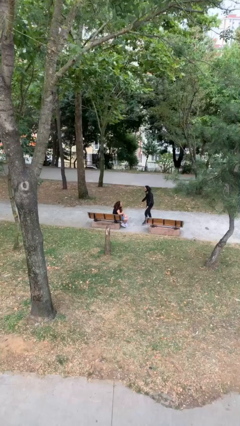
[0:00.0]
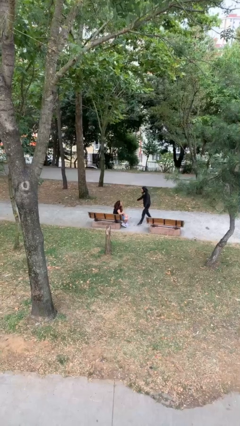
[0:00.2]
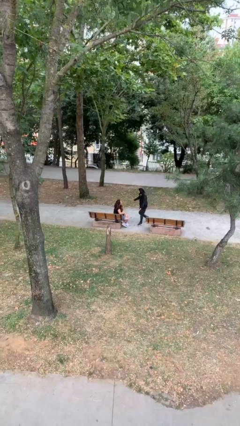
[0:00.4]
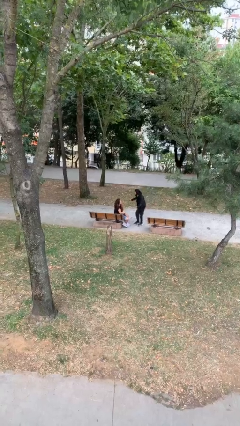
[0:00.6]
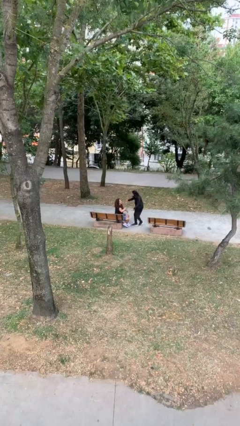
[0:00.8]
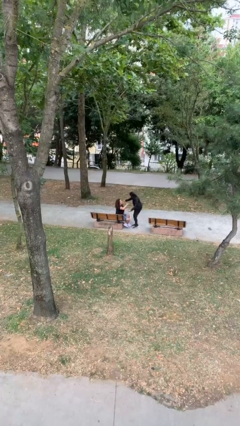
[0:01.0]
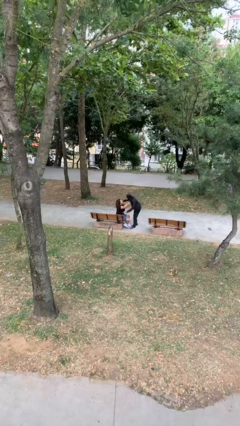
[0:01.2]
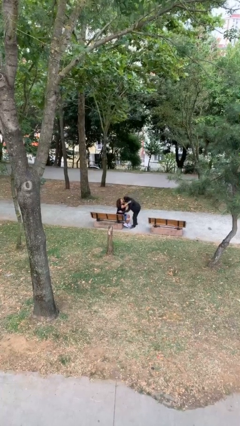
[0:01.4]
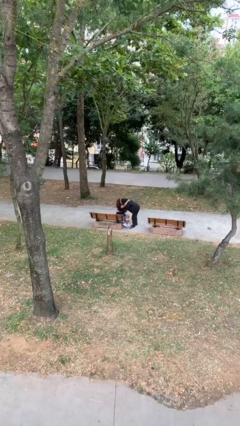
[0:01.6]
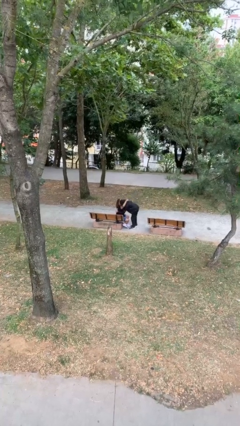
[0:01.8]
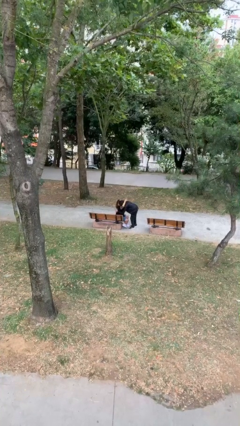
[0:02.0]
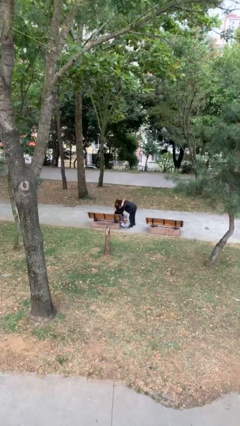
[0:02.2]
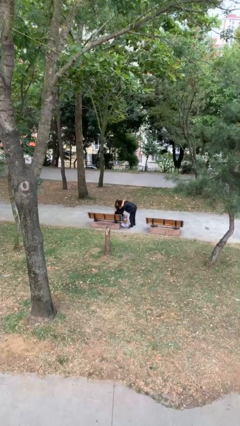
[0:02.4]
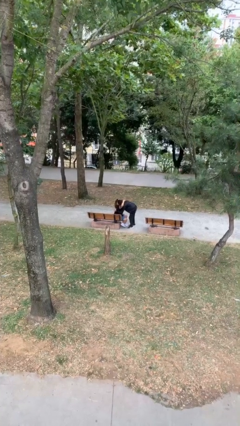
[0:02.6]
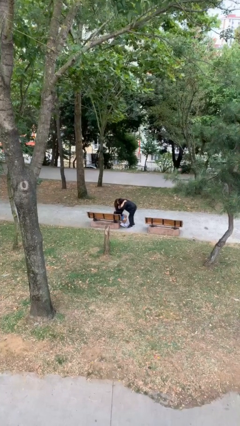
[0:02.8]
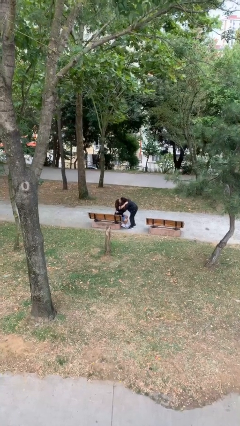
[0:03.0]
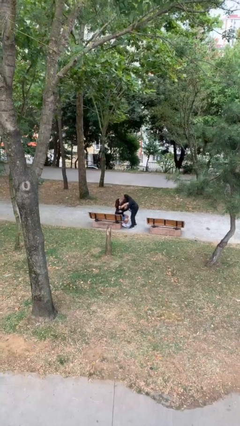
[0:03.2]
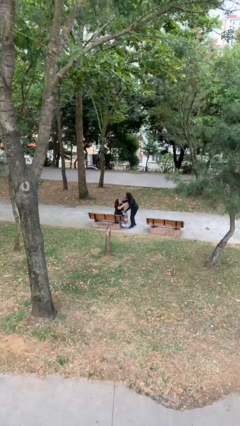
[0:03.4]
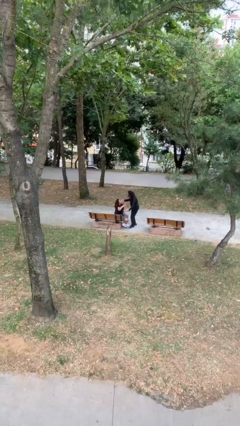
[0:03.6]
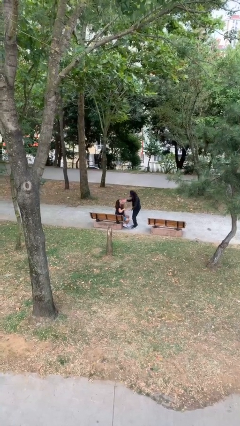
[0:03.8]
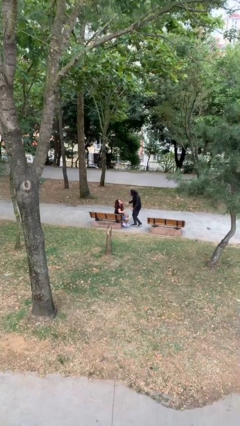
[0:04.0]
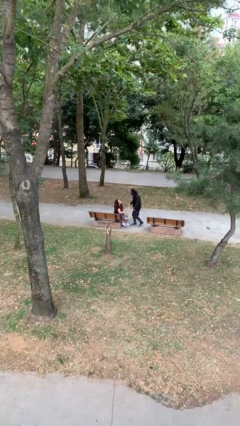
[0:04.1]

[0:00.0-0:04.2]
person embraces person

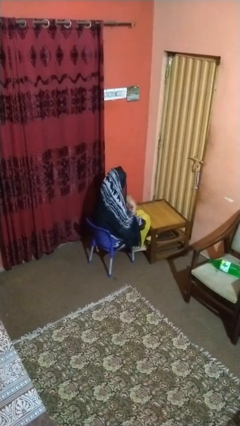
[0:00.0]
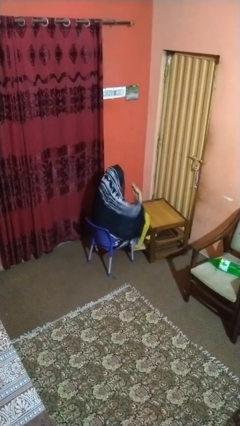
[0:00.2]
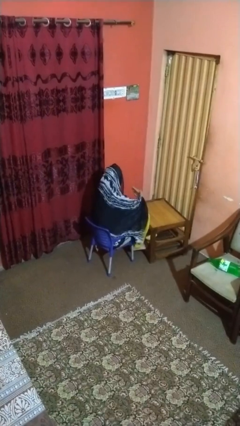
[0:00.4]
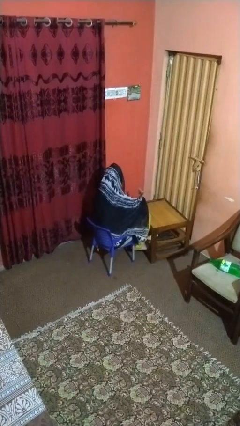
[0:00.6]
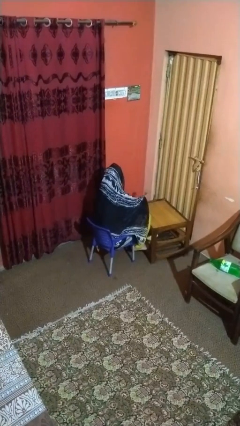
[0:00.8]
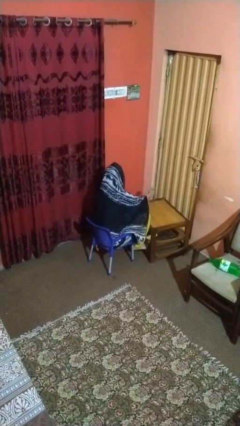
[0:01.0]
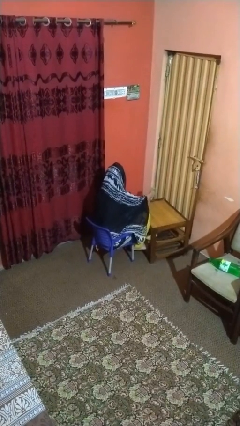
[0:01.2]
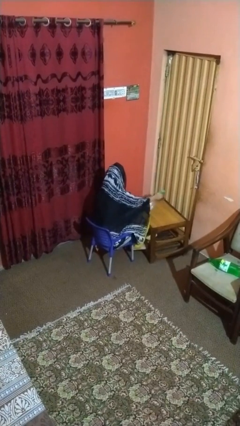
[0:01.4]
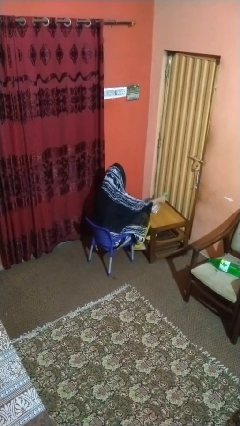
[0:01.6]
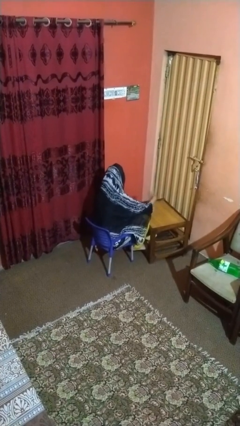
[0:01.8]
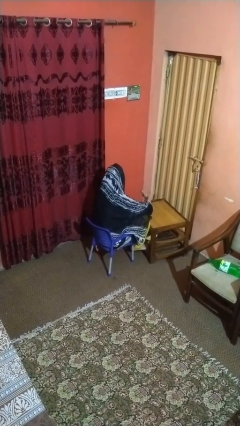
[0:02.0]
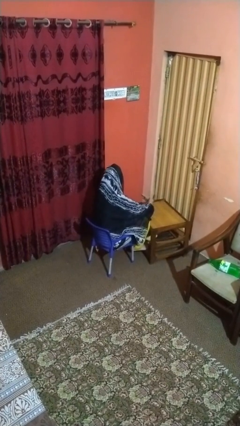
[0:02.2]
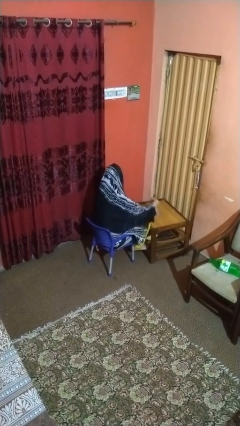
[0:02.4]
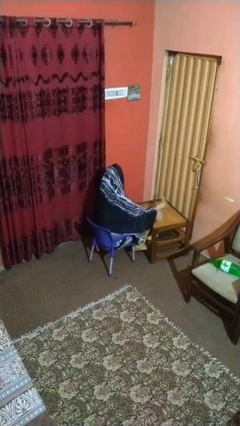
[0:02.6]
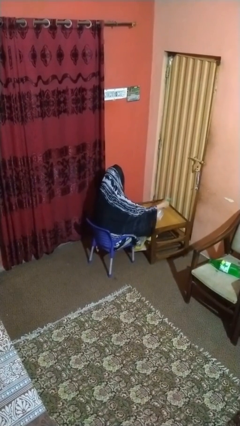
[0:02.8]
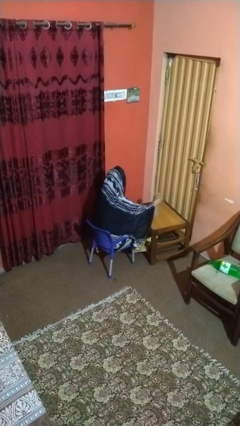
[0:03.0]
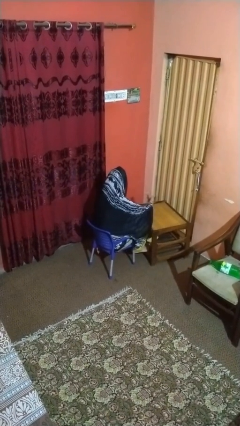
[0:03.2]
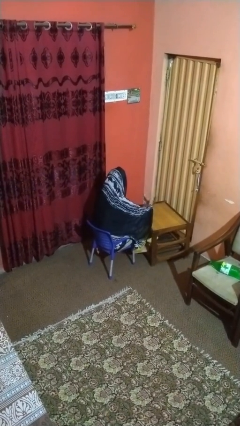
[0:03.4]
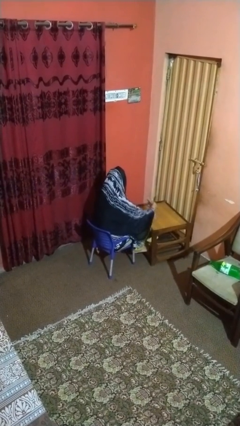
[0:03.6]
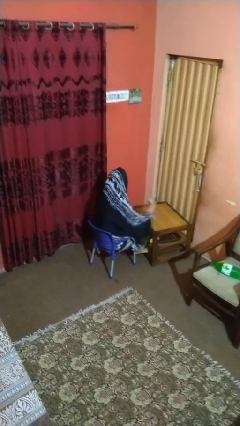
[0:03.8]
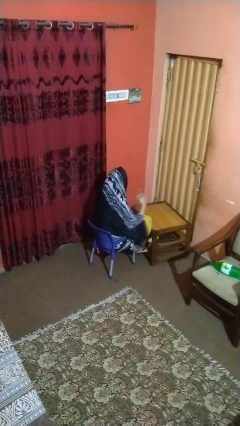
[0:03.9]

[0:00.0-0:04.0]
person sprays from bottle

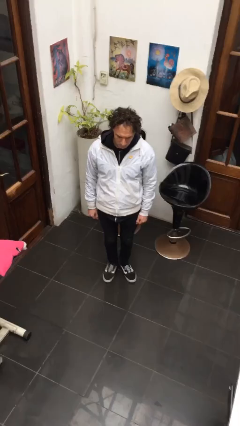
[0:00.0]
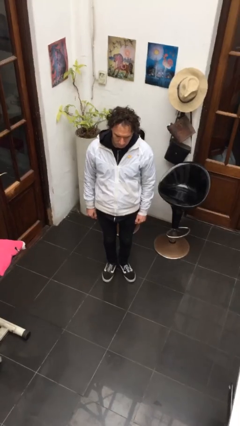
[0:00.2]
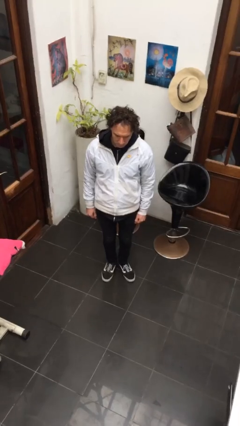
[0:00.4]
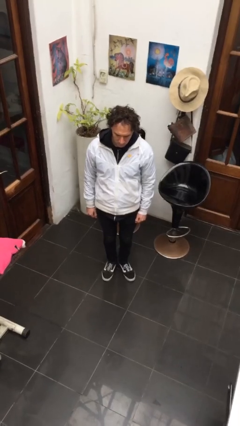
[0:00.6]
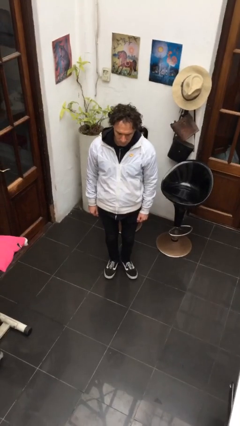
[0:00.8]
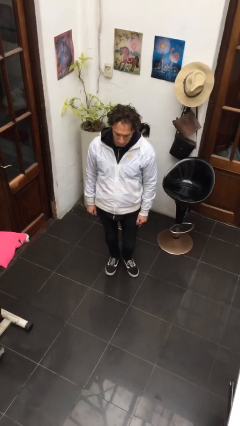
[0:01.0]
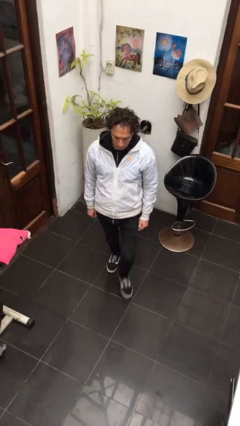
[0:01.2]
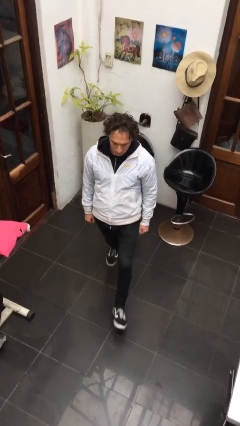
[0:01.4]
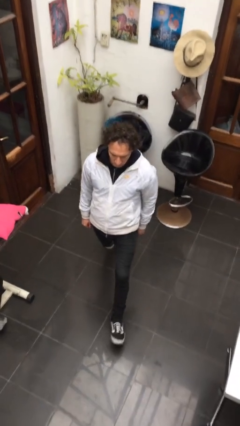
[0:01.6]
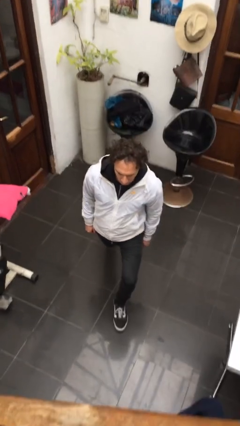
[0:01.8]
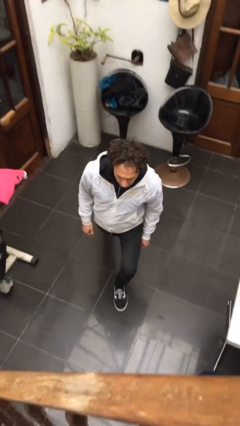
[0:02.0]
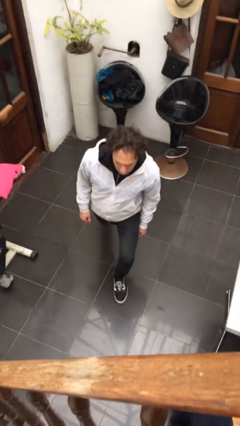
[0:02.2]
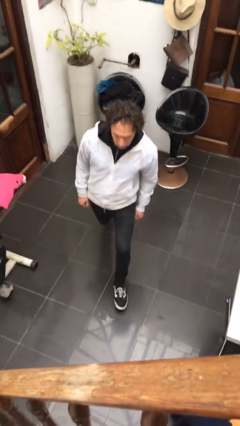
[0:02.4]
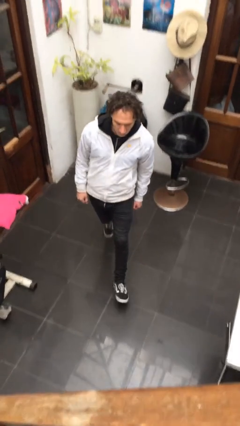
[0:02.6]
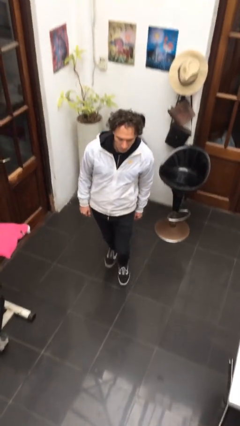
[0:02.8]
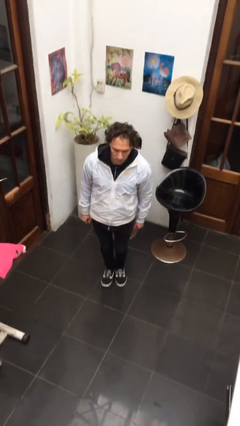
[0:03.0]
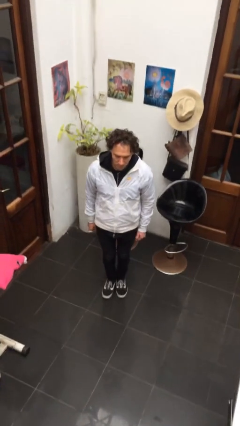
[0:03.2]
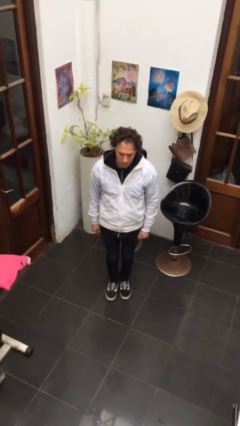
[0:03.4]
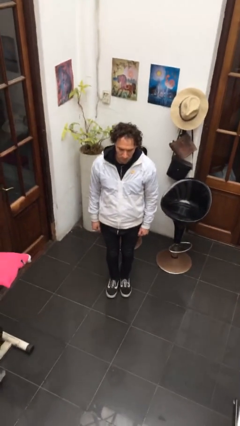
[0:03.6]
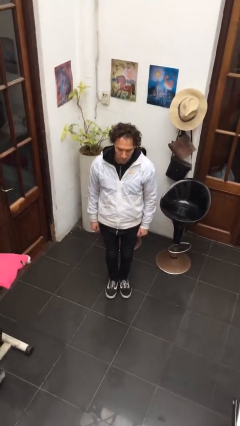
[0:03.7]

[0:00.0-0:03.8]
person exercises with lunges

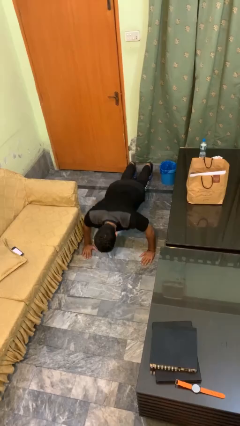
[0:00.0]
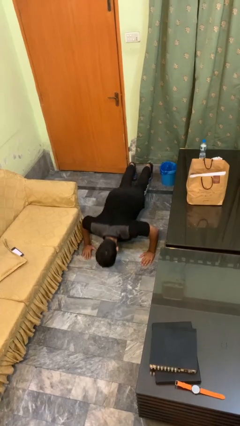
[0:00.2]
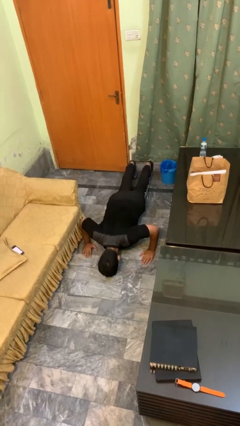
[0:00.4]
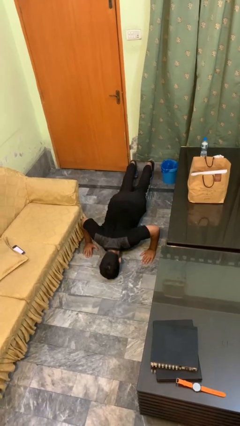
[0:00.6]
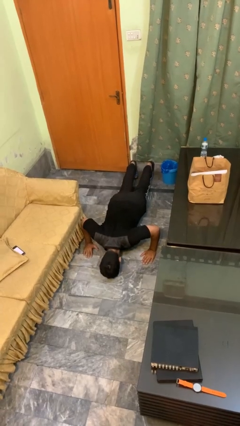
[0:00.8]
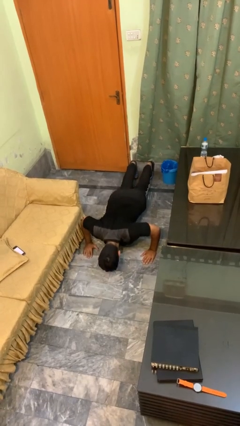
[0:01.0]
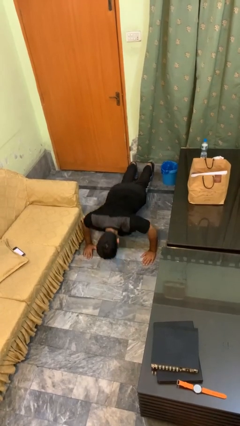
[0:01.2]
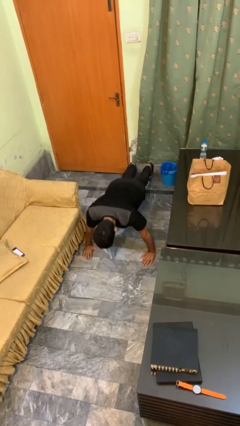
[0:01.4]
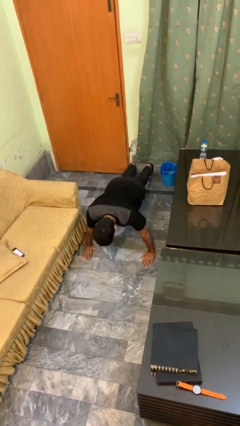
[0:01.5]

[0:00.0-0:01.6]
person exercises with pushup

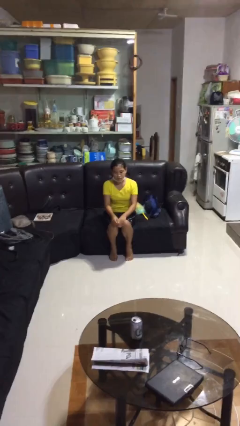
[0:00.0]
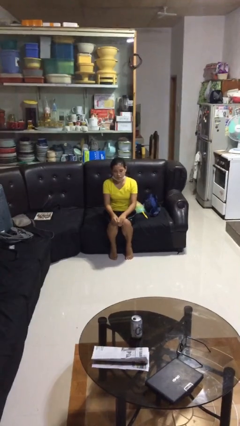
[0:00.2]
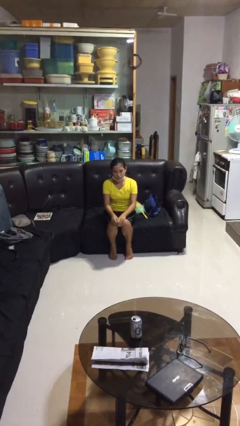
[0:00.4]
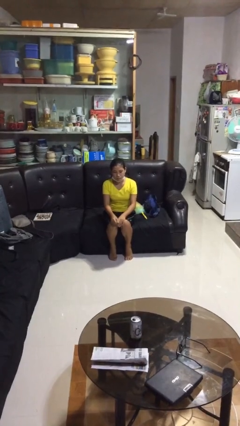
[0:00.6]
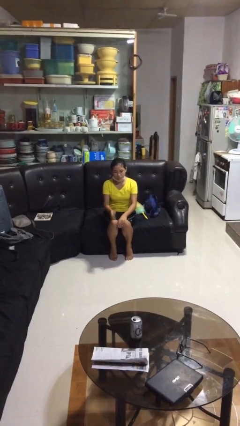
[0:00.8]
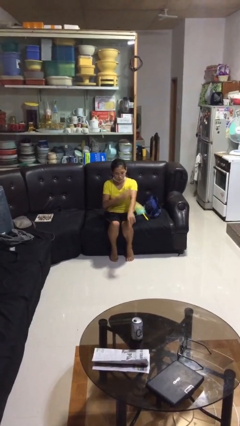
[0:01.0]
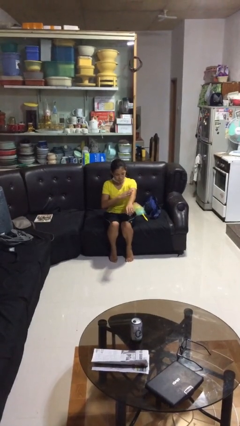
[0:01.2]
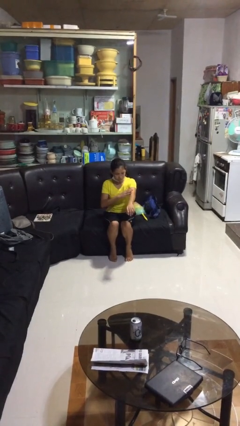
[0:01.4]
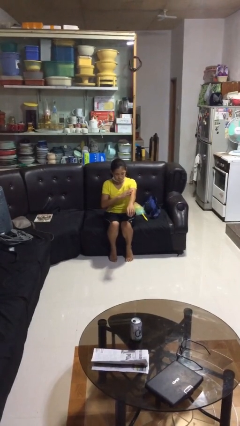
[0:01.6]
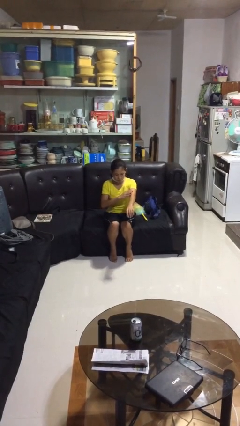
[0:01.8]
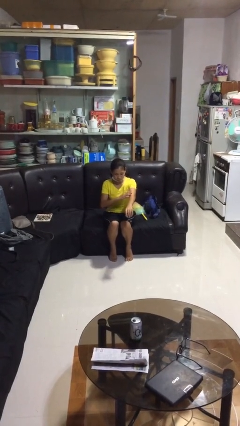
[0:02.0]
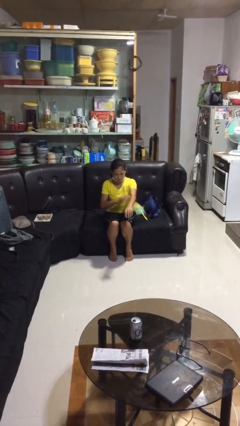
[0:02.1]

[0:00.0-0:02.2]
person swats bug

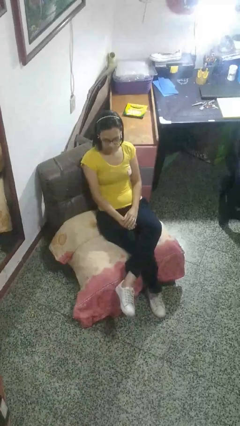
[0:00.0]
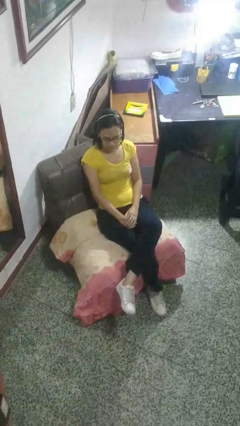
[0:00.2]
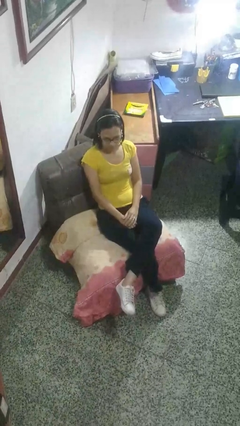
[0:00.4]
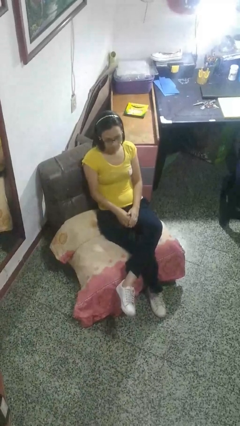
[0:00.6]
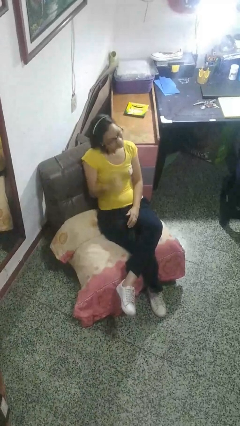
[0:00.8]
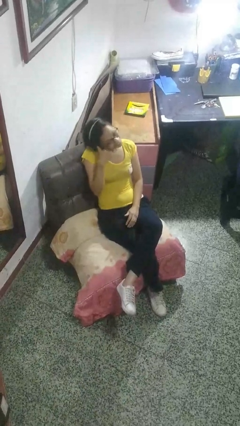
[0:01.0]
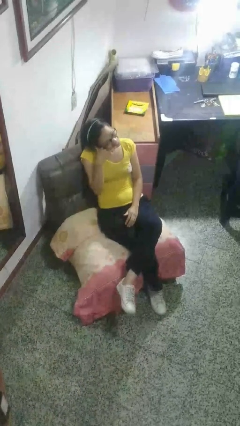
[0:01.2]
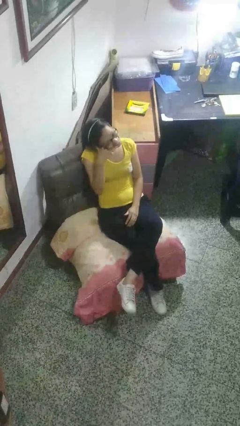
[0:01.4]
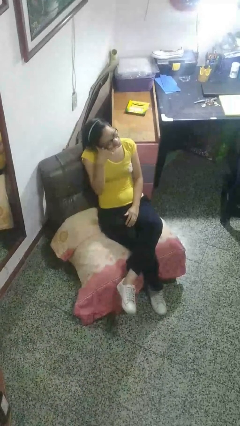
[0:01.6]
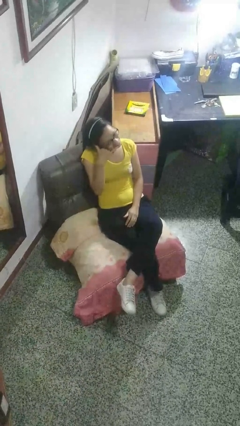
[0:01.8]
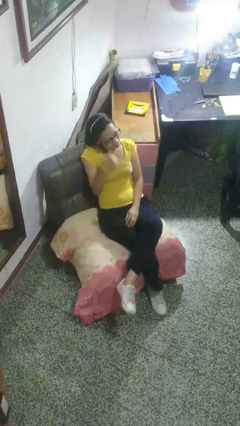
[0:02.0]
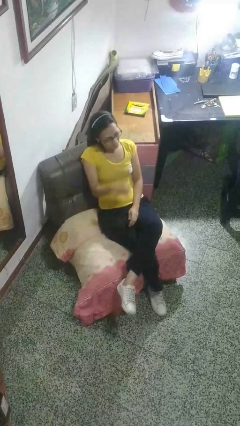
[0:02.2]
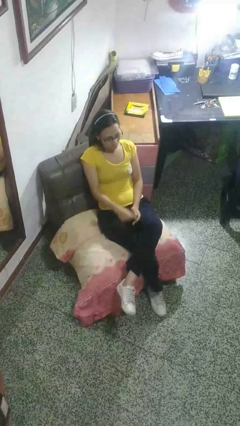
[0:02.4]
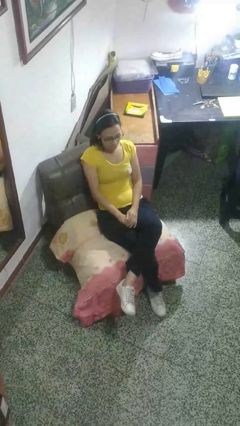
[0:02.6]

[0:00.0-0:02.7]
person gestures call me
